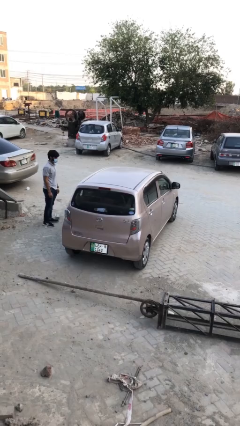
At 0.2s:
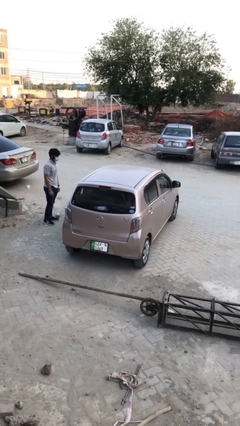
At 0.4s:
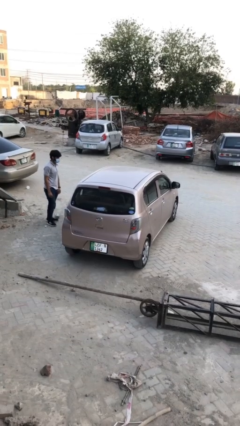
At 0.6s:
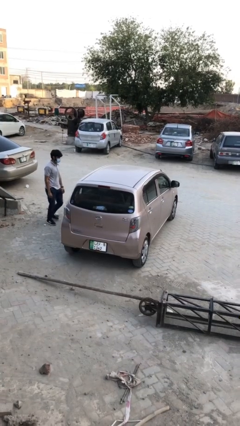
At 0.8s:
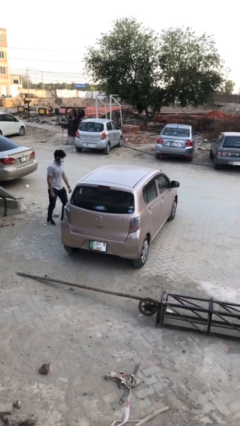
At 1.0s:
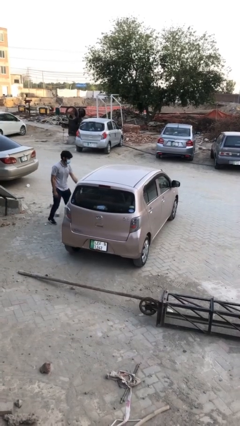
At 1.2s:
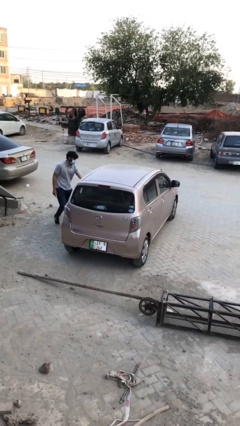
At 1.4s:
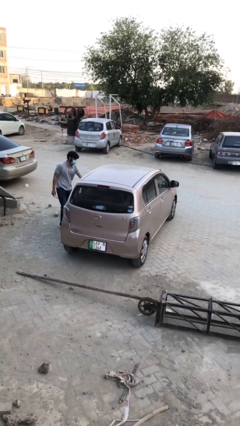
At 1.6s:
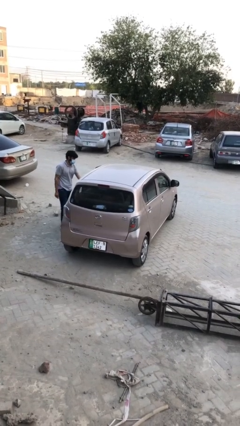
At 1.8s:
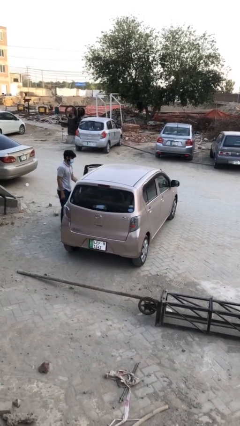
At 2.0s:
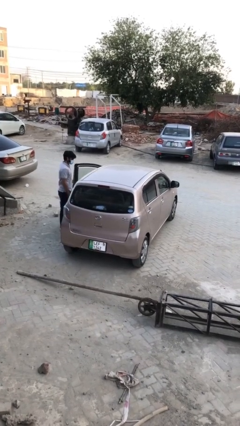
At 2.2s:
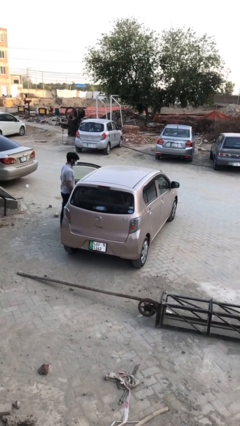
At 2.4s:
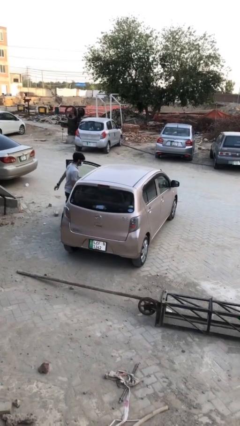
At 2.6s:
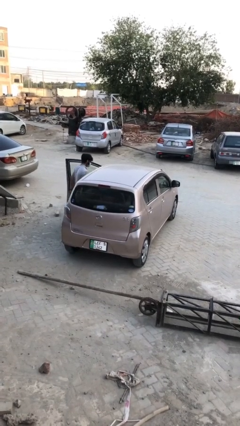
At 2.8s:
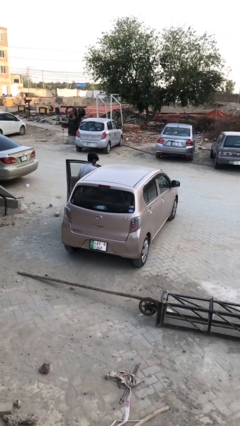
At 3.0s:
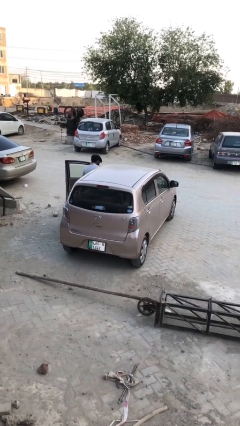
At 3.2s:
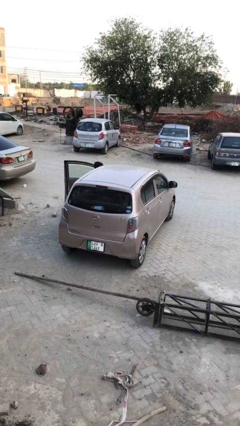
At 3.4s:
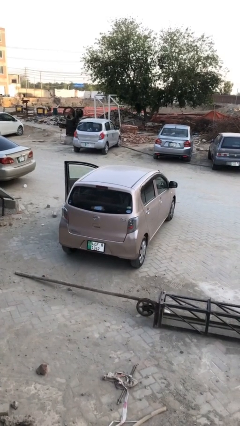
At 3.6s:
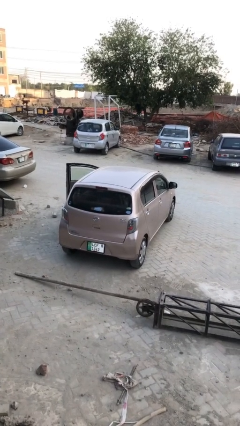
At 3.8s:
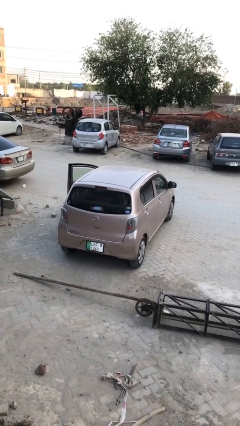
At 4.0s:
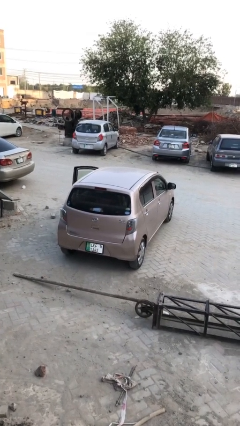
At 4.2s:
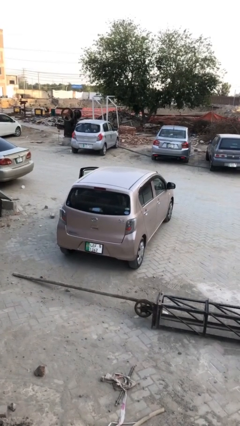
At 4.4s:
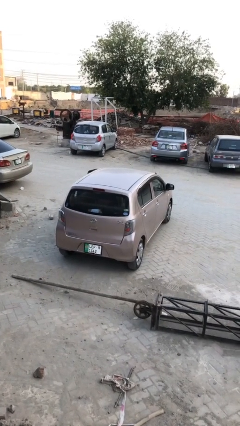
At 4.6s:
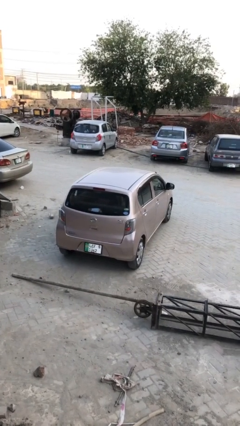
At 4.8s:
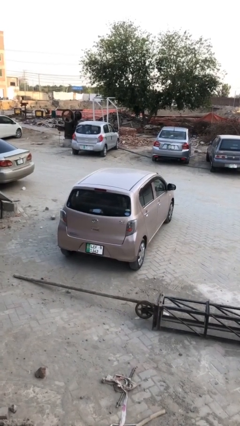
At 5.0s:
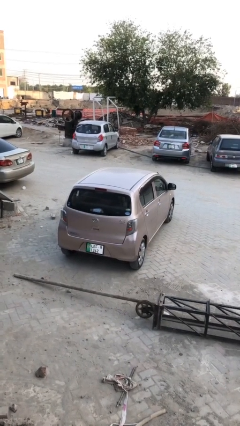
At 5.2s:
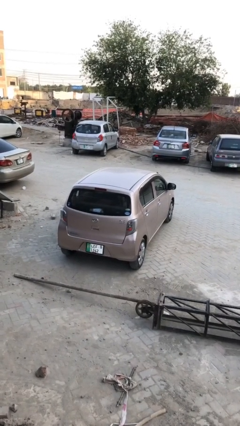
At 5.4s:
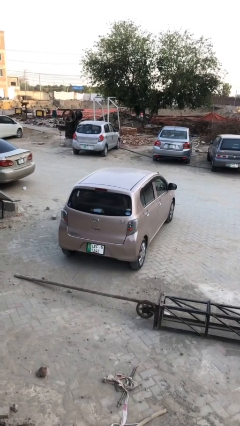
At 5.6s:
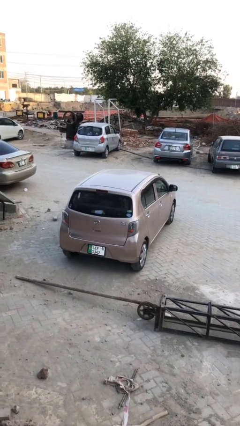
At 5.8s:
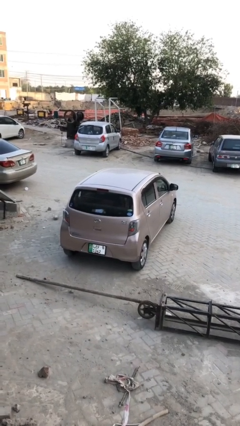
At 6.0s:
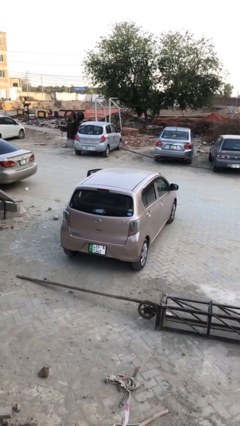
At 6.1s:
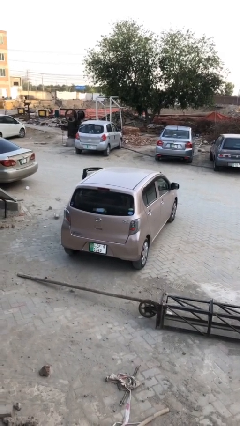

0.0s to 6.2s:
car picks up person

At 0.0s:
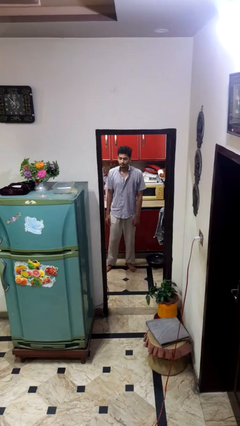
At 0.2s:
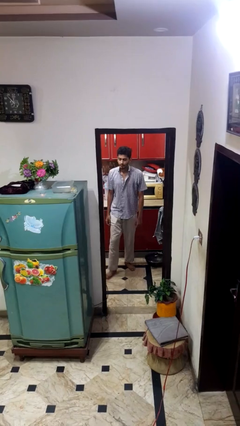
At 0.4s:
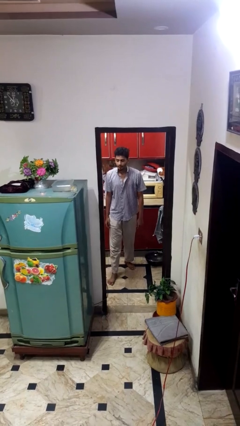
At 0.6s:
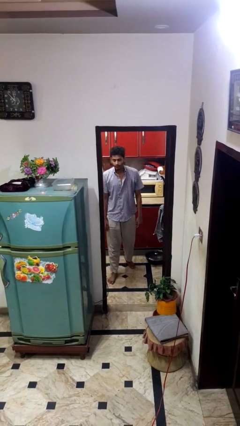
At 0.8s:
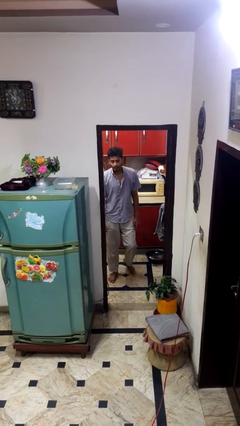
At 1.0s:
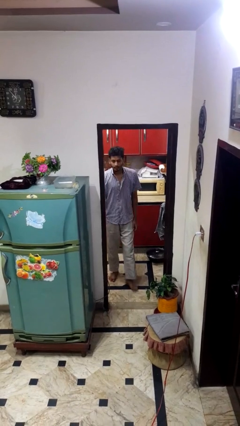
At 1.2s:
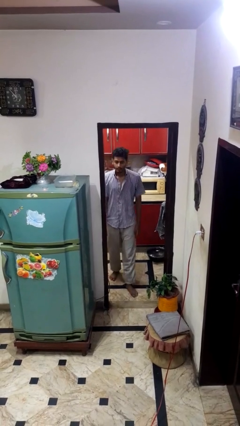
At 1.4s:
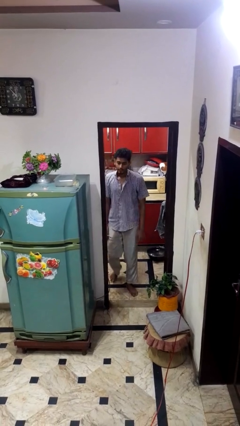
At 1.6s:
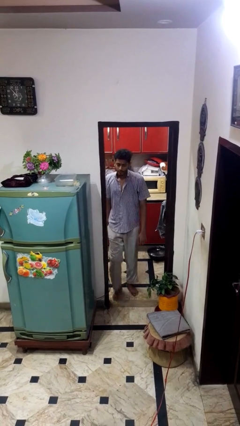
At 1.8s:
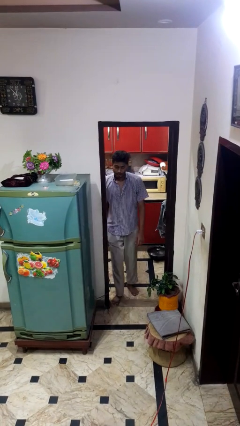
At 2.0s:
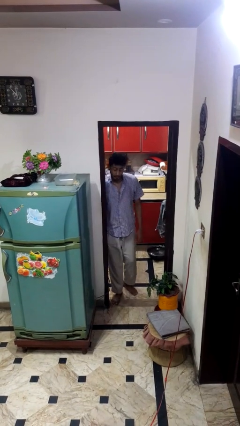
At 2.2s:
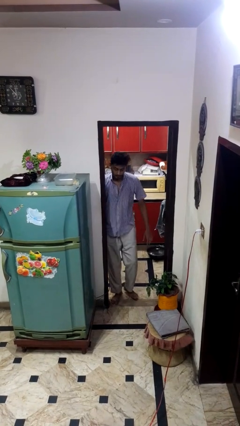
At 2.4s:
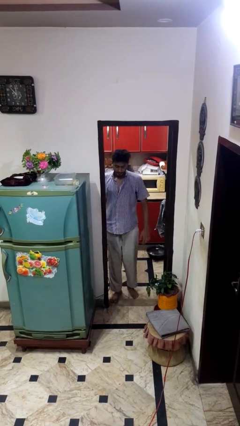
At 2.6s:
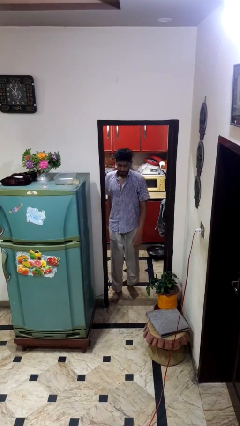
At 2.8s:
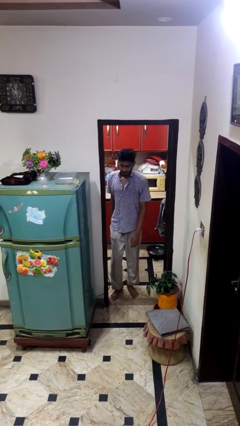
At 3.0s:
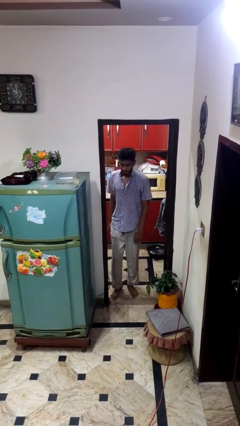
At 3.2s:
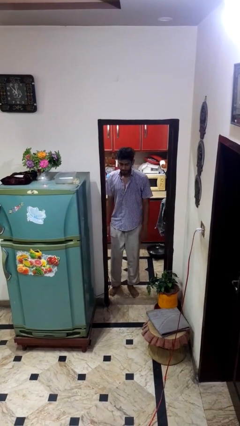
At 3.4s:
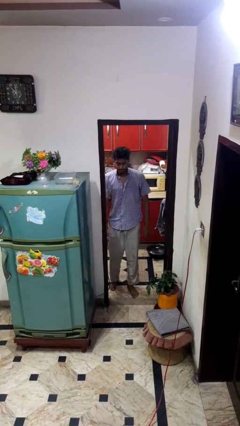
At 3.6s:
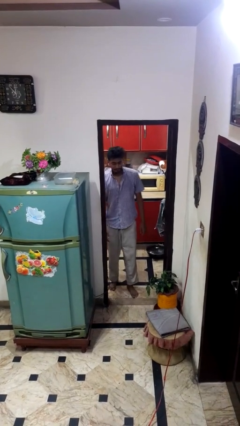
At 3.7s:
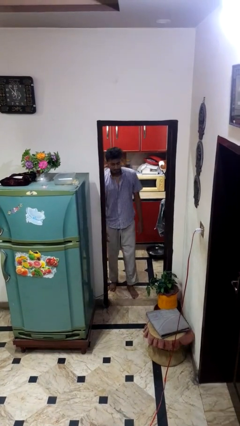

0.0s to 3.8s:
person bumps into wall

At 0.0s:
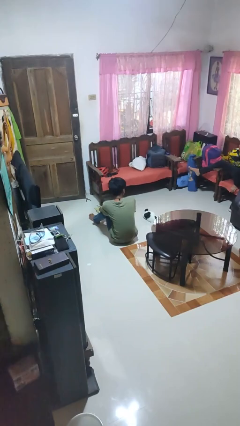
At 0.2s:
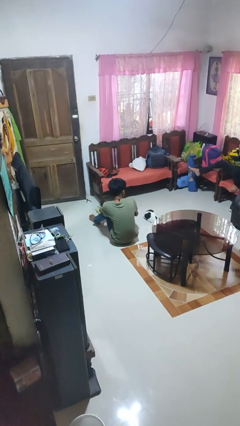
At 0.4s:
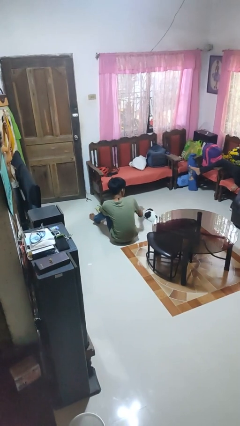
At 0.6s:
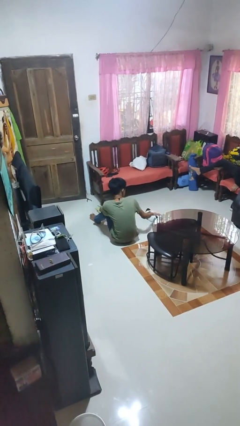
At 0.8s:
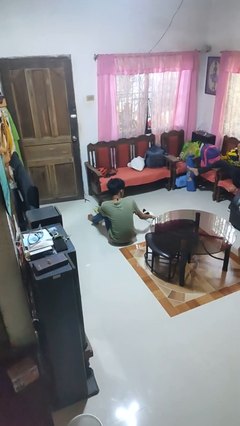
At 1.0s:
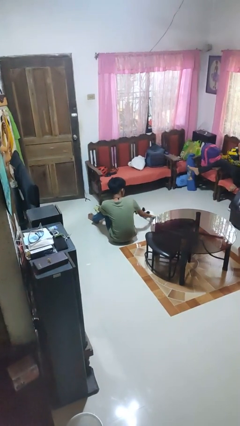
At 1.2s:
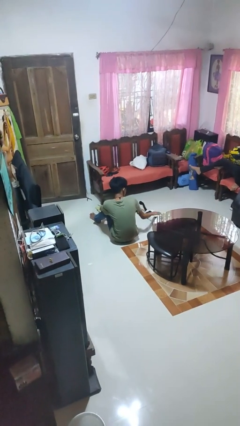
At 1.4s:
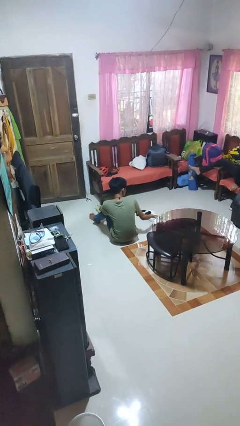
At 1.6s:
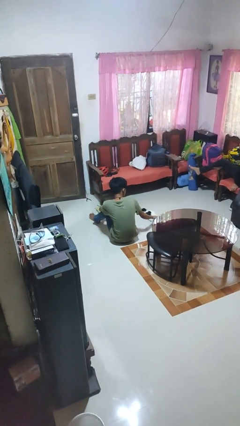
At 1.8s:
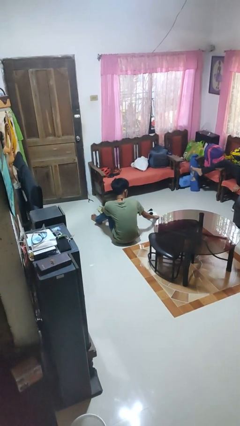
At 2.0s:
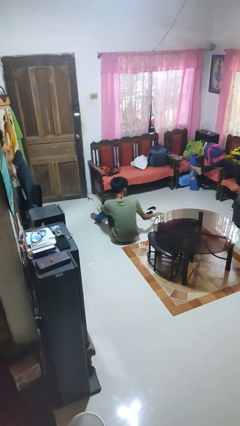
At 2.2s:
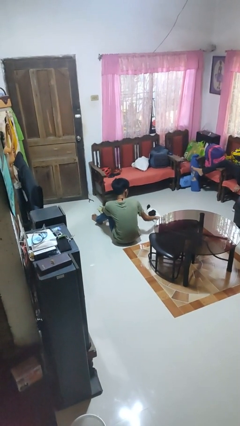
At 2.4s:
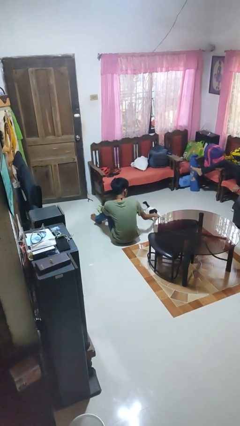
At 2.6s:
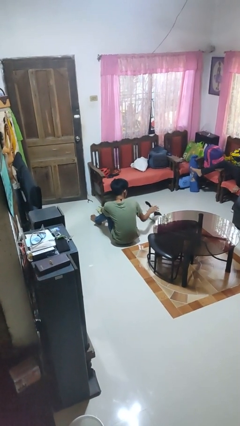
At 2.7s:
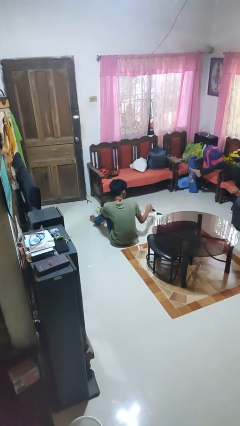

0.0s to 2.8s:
person pets cat

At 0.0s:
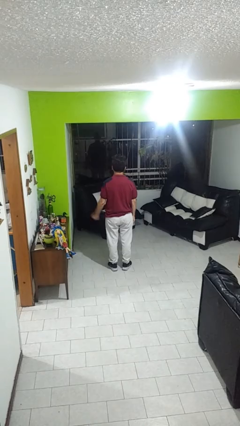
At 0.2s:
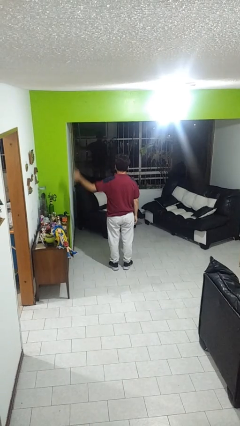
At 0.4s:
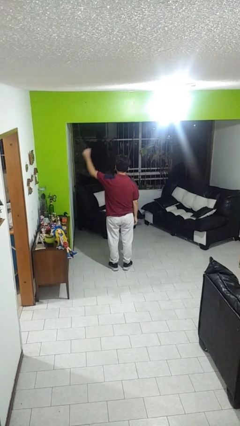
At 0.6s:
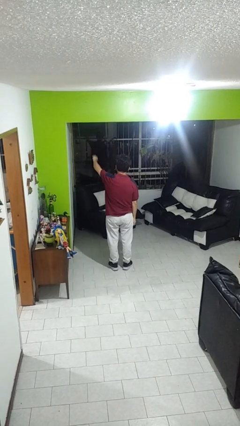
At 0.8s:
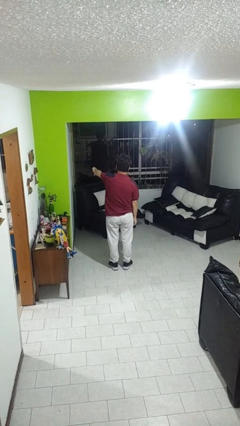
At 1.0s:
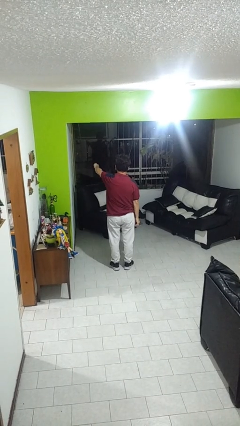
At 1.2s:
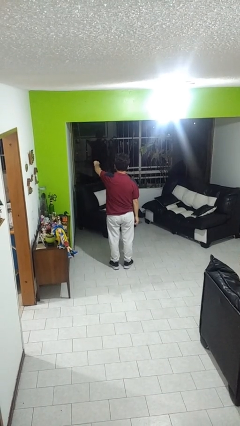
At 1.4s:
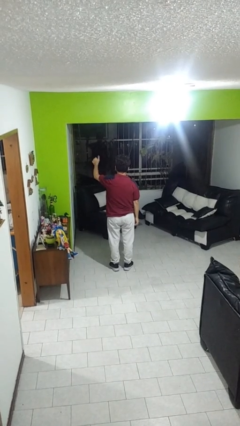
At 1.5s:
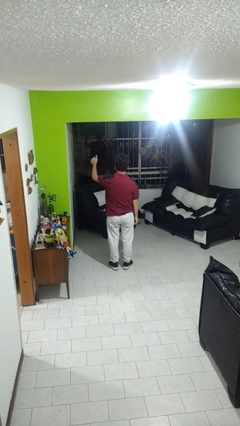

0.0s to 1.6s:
person gestures thumbs down

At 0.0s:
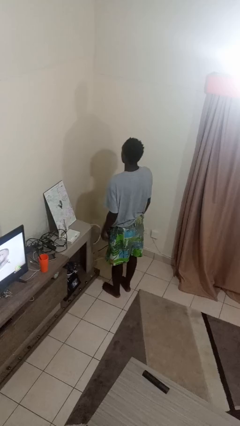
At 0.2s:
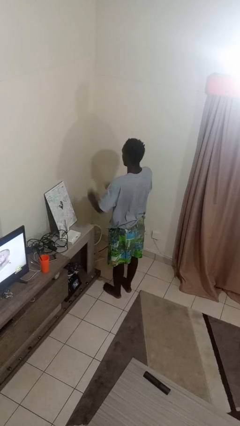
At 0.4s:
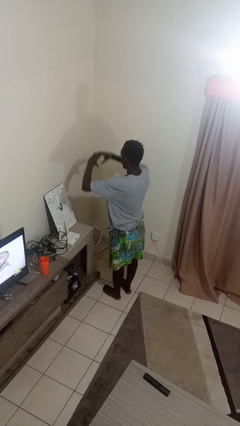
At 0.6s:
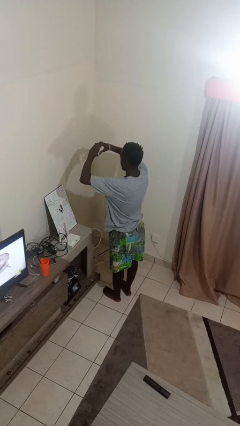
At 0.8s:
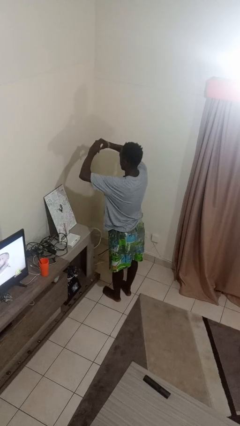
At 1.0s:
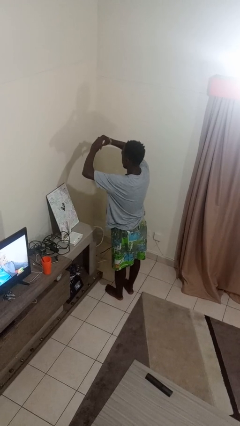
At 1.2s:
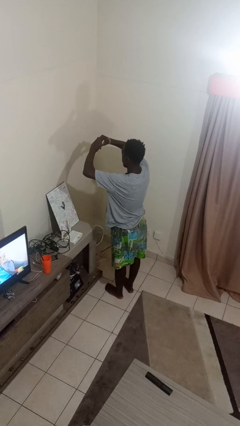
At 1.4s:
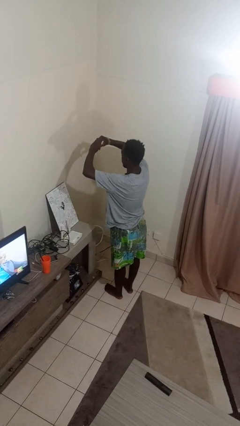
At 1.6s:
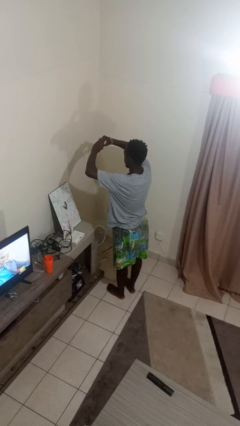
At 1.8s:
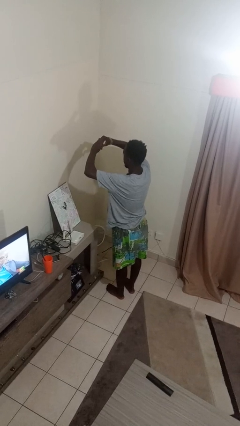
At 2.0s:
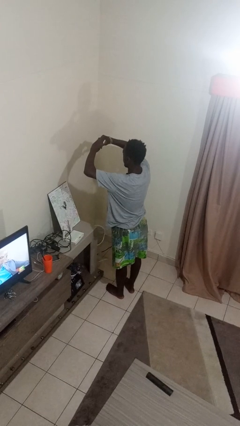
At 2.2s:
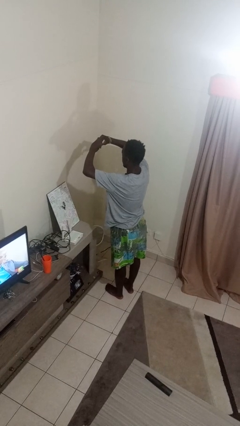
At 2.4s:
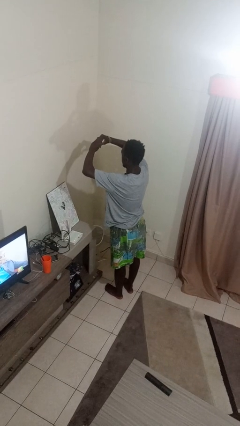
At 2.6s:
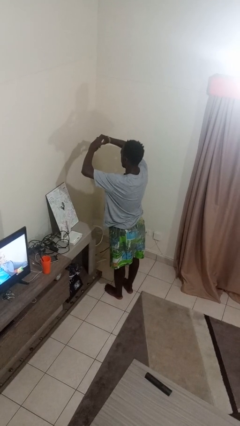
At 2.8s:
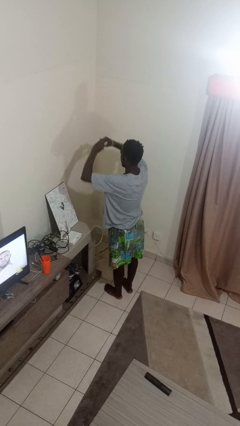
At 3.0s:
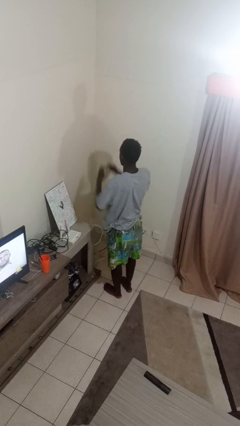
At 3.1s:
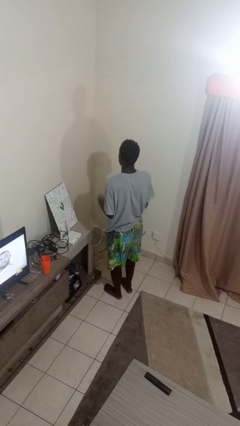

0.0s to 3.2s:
person gestures heart

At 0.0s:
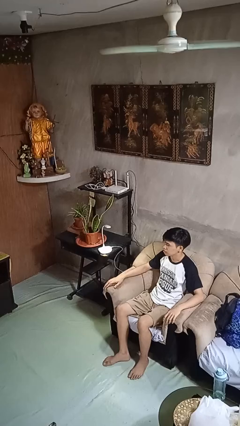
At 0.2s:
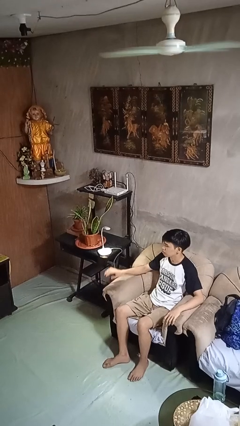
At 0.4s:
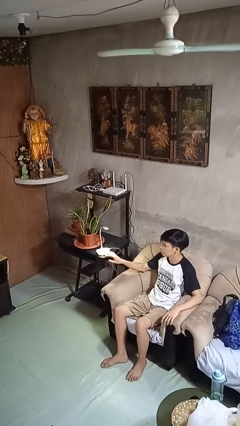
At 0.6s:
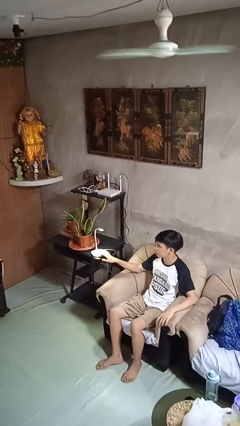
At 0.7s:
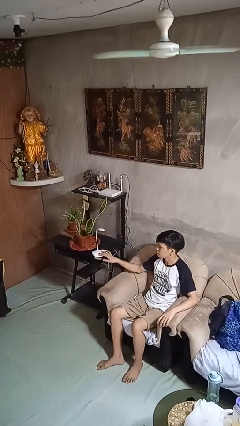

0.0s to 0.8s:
person turns off lamp
